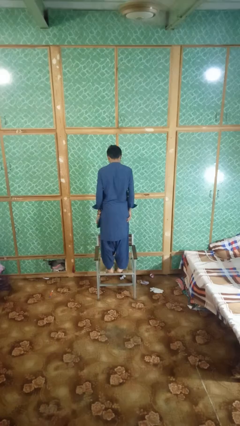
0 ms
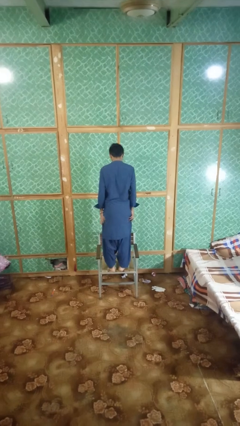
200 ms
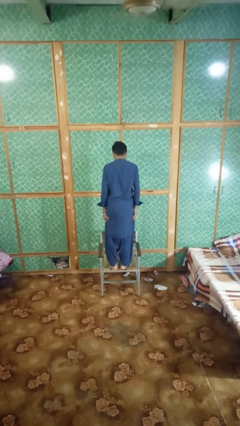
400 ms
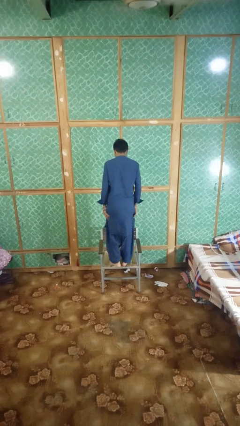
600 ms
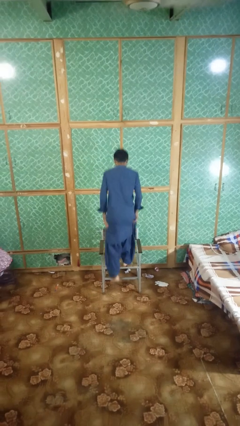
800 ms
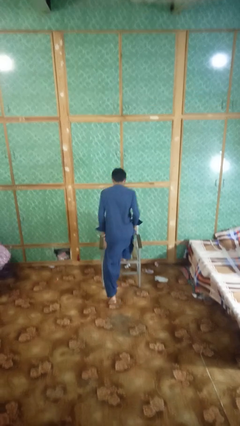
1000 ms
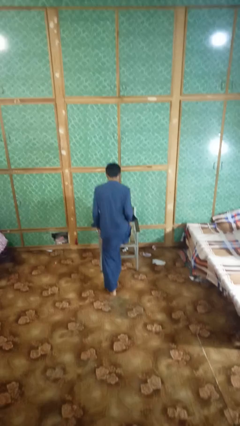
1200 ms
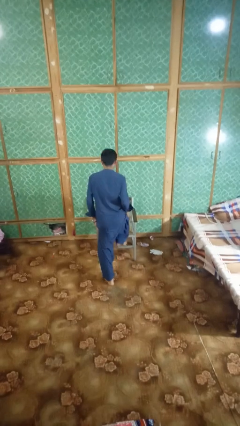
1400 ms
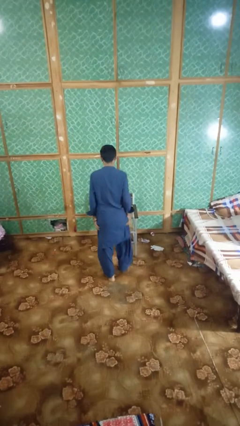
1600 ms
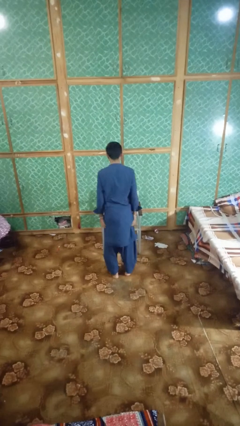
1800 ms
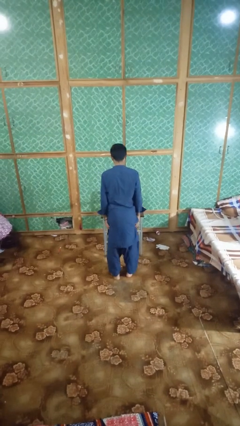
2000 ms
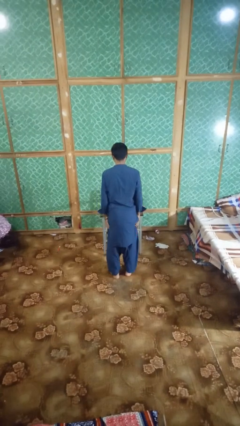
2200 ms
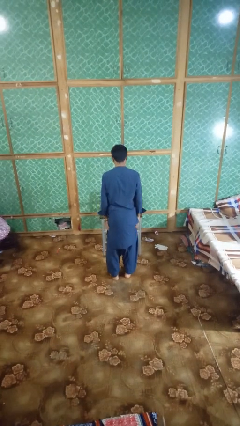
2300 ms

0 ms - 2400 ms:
person climbs off chair

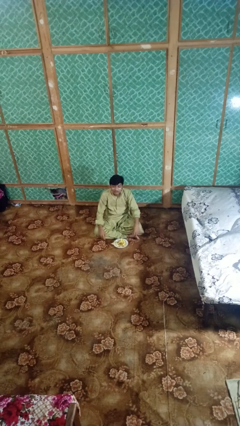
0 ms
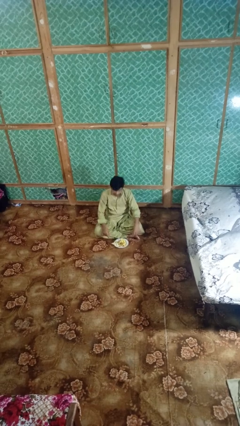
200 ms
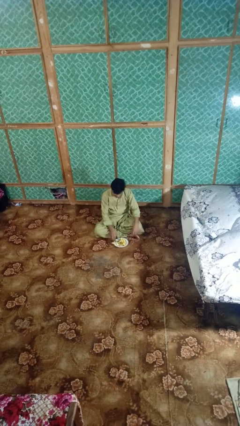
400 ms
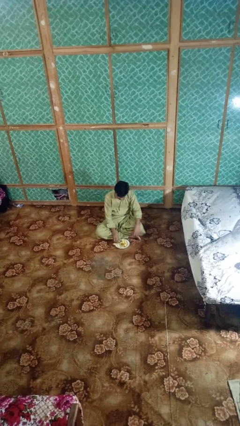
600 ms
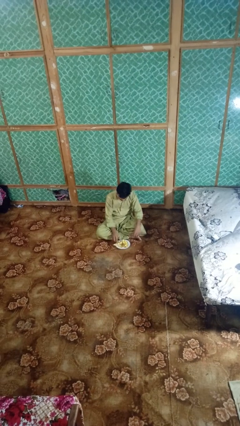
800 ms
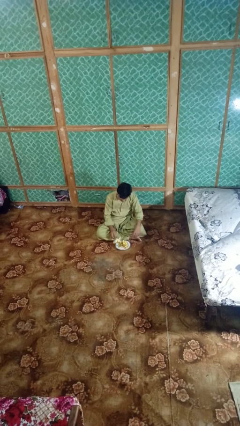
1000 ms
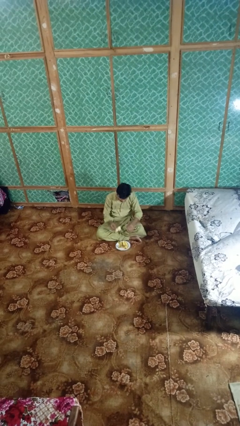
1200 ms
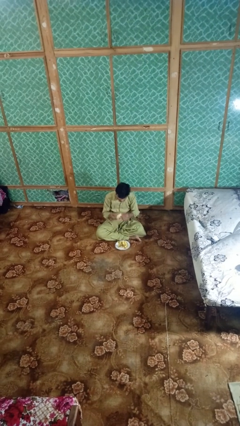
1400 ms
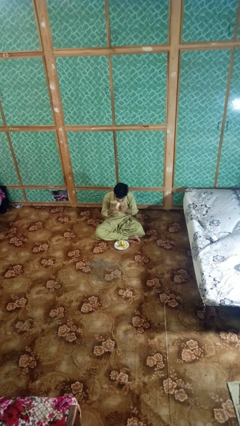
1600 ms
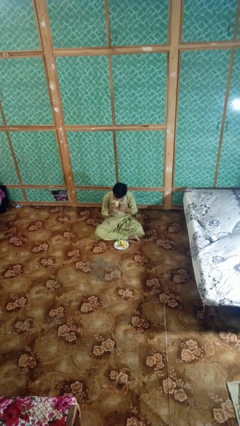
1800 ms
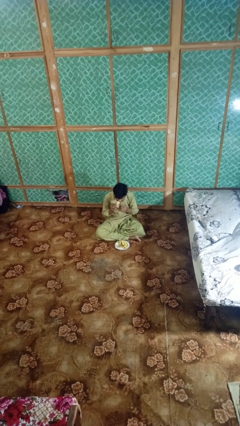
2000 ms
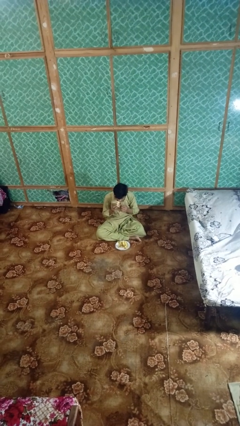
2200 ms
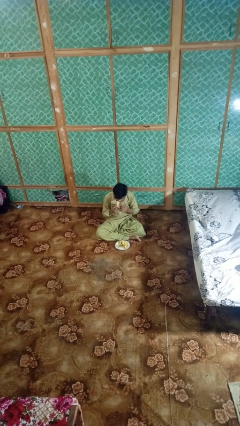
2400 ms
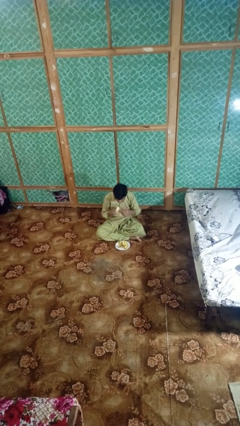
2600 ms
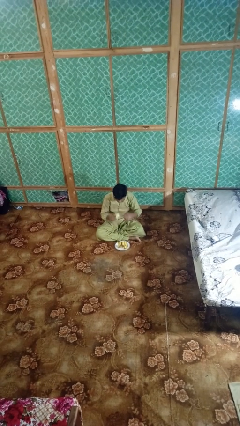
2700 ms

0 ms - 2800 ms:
person eats banana

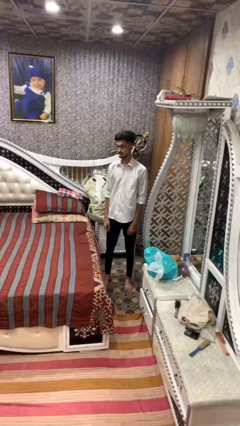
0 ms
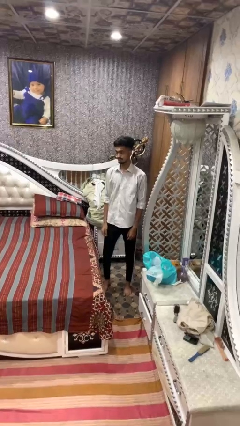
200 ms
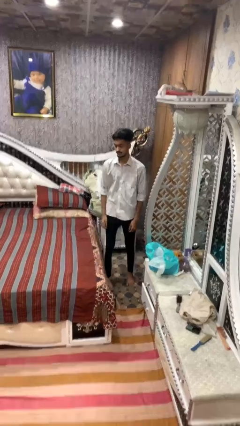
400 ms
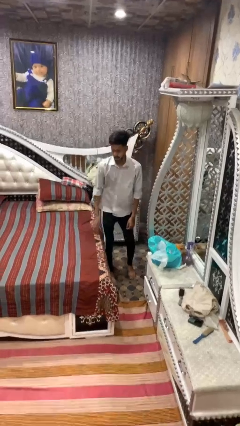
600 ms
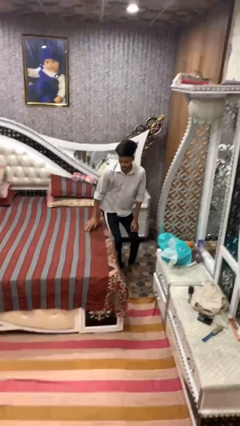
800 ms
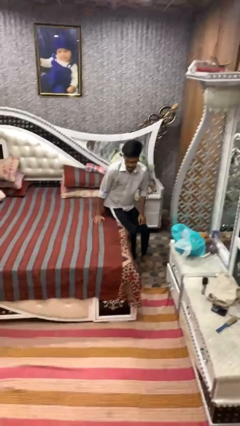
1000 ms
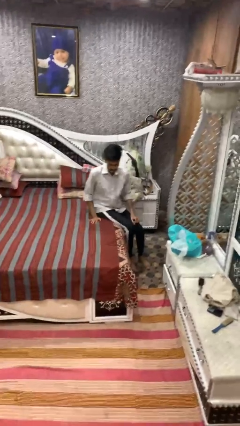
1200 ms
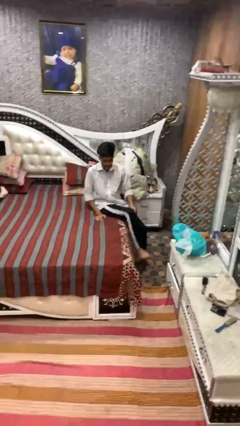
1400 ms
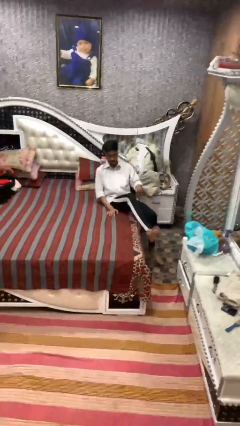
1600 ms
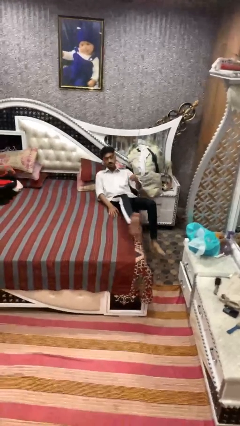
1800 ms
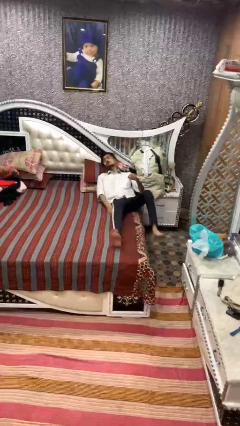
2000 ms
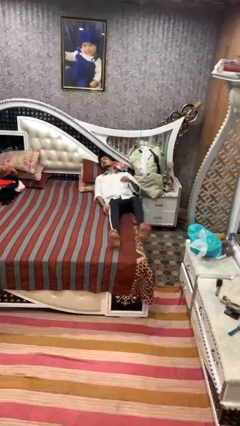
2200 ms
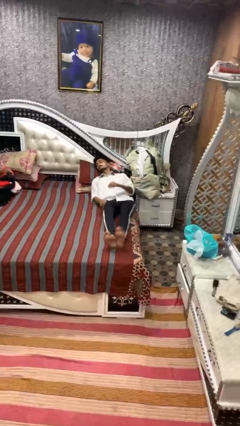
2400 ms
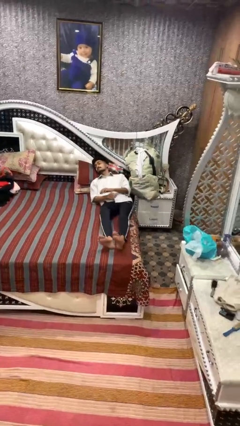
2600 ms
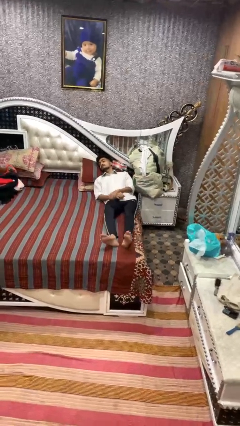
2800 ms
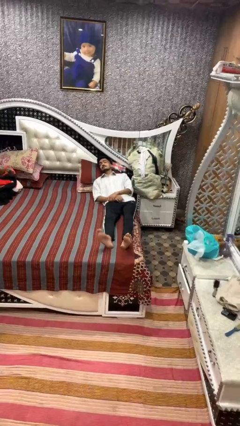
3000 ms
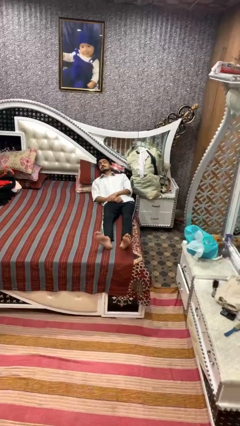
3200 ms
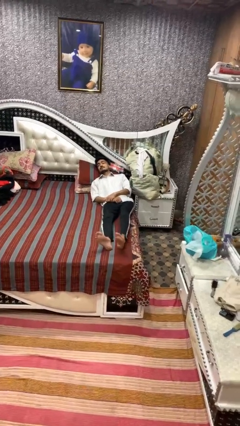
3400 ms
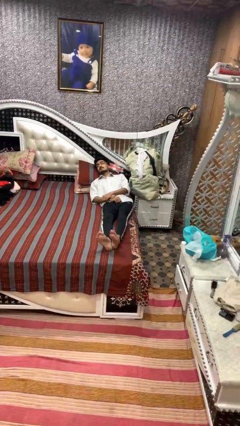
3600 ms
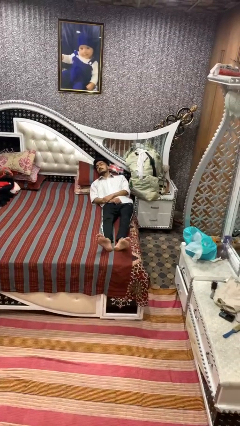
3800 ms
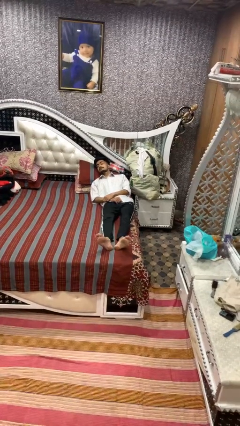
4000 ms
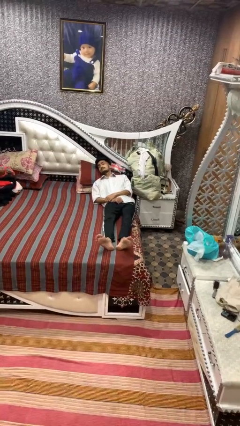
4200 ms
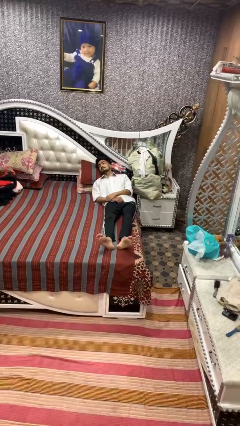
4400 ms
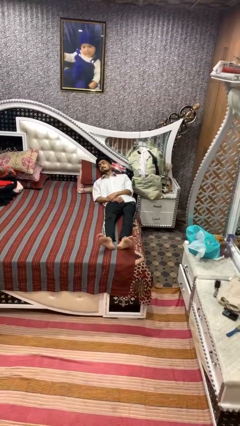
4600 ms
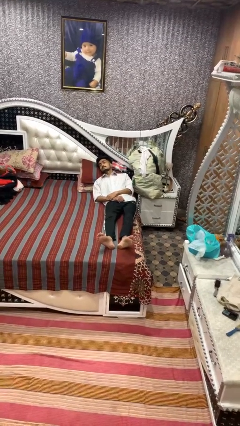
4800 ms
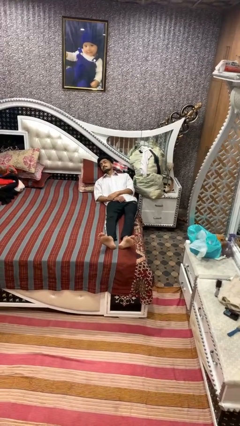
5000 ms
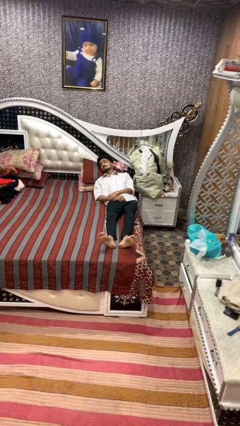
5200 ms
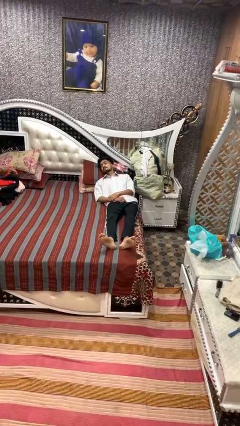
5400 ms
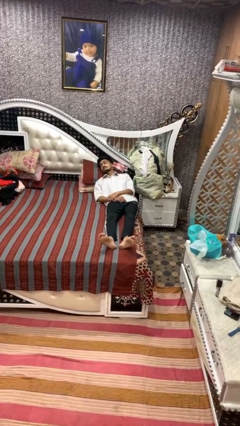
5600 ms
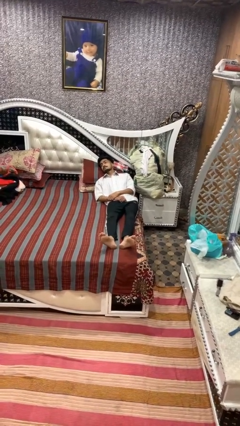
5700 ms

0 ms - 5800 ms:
person lies down on bed

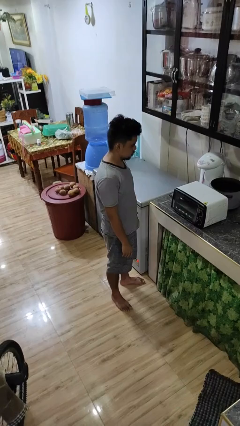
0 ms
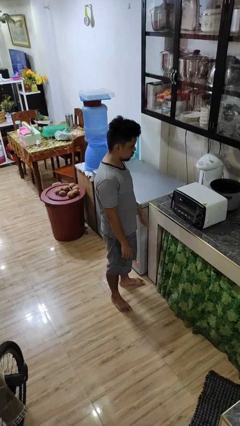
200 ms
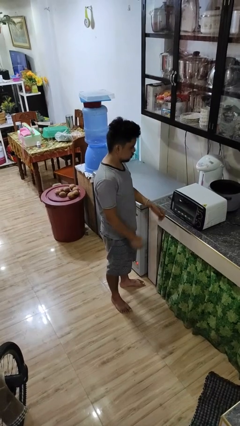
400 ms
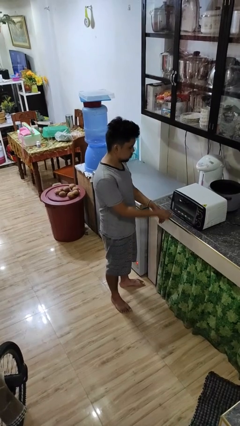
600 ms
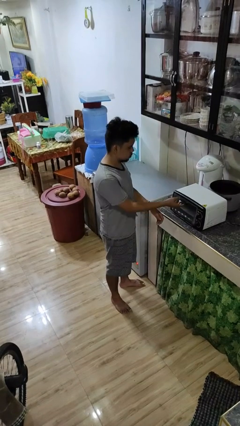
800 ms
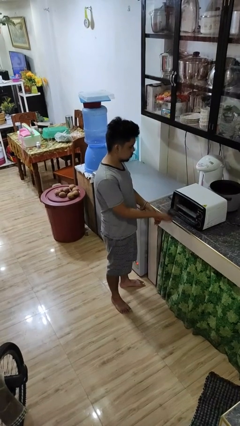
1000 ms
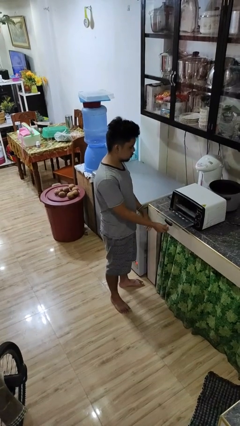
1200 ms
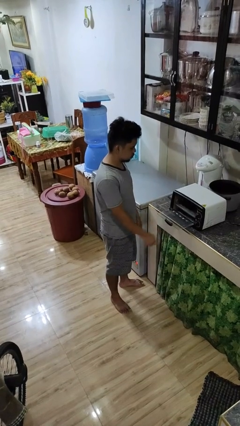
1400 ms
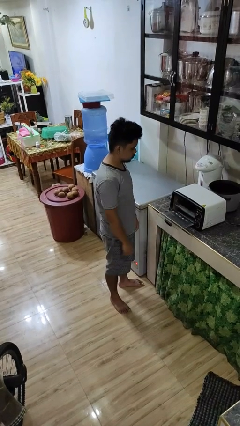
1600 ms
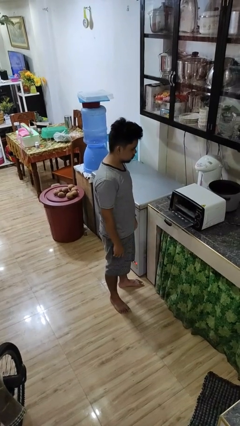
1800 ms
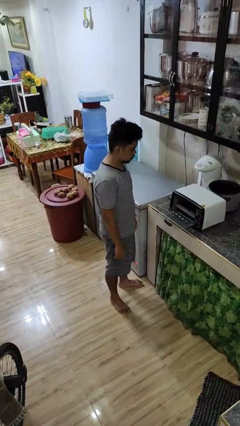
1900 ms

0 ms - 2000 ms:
person opens microwave

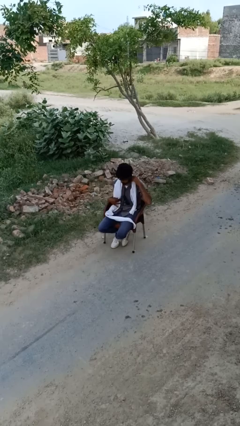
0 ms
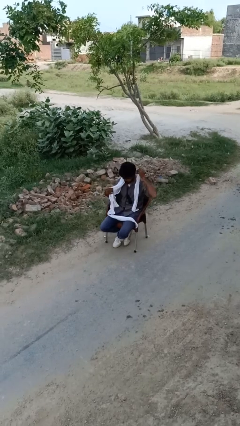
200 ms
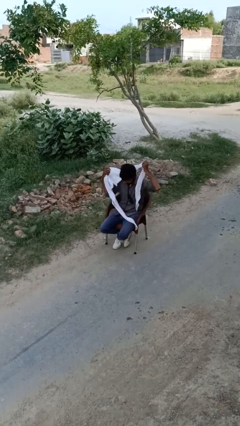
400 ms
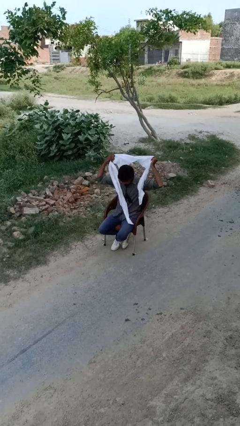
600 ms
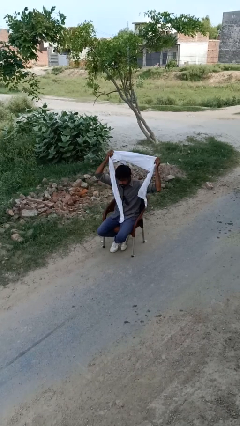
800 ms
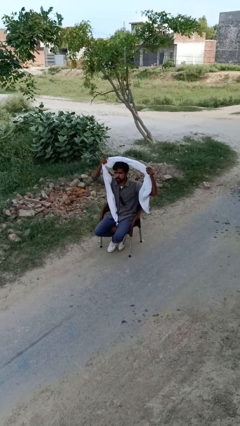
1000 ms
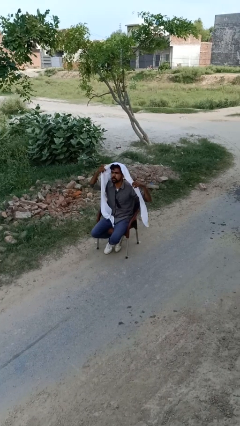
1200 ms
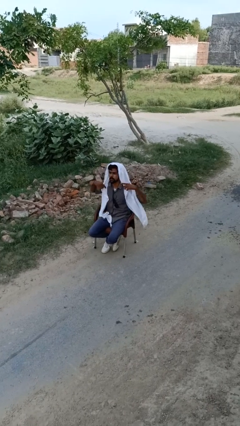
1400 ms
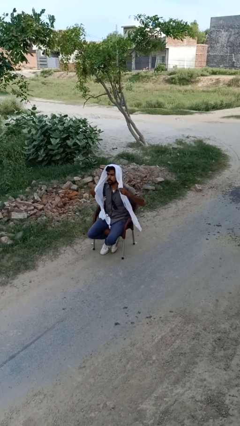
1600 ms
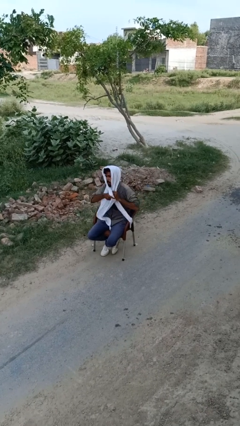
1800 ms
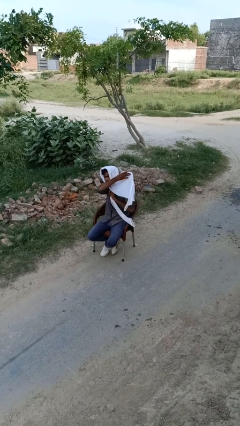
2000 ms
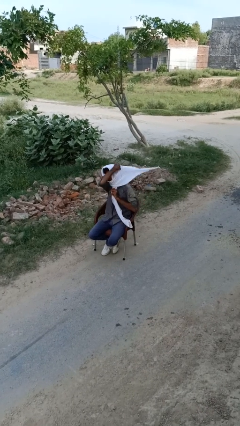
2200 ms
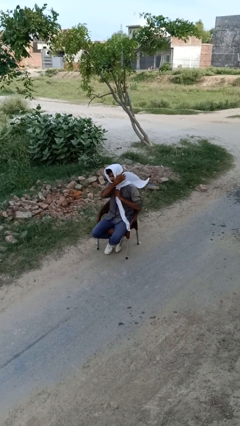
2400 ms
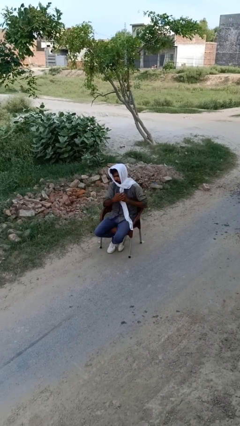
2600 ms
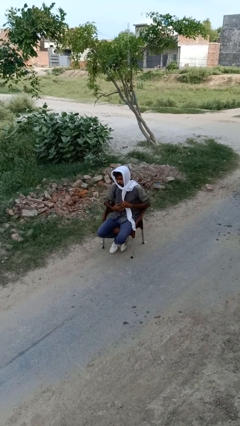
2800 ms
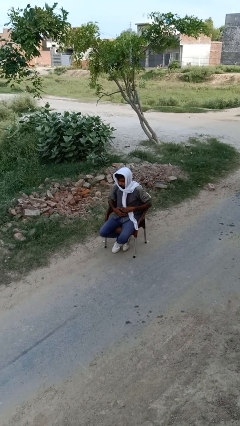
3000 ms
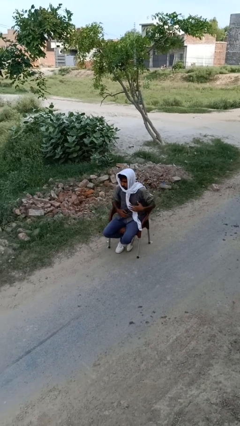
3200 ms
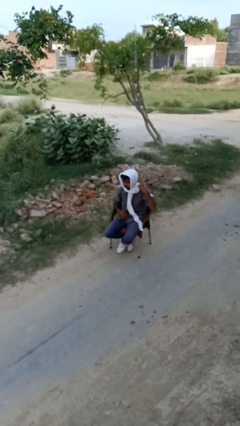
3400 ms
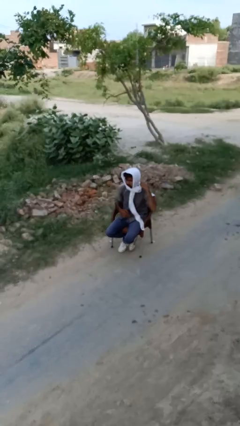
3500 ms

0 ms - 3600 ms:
person puts on scarf

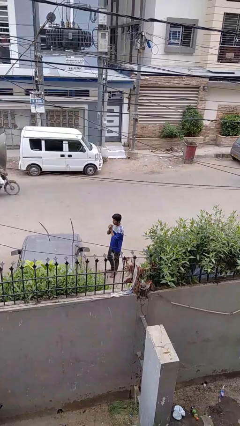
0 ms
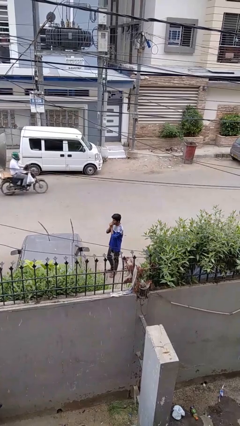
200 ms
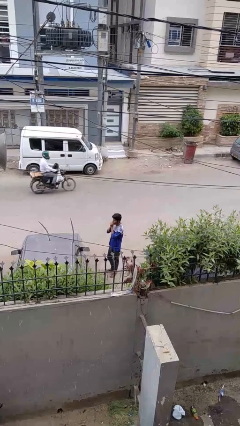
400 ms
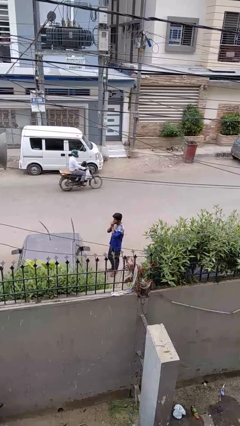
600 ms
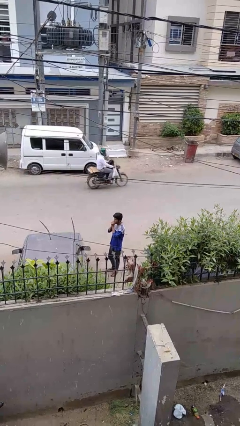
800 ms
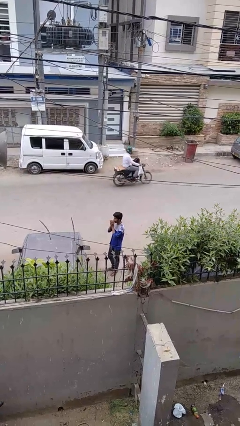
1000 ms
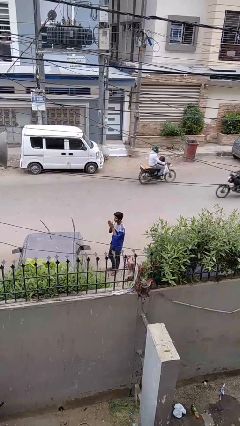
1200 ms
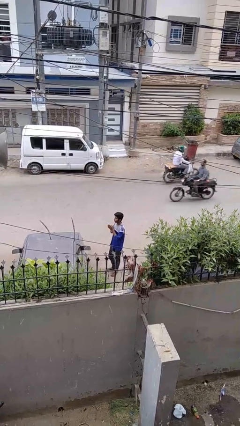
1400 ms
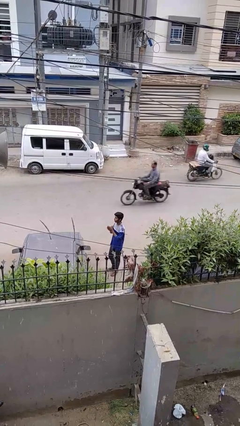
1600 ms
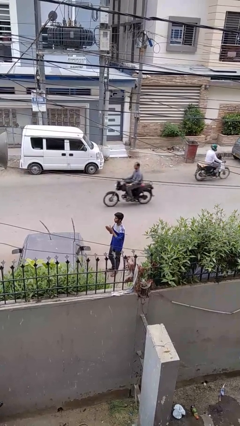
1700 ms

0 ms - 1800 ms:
person blows into hands
